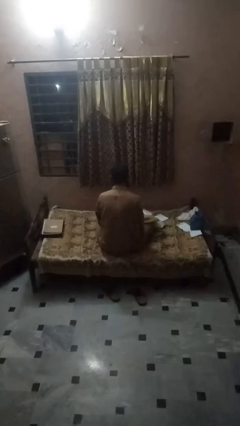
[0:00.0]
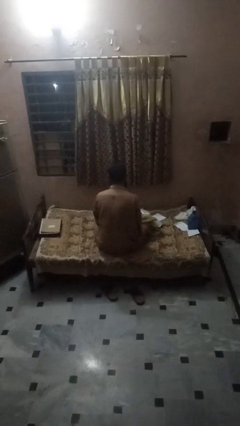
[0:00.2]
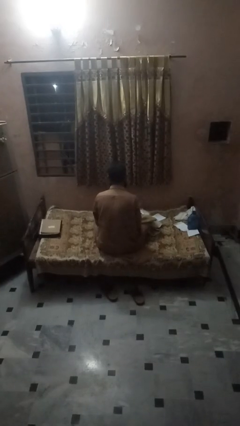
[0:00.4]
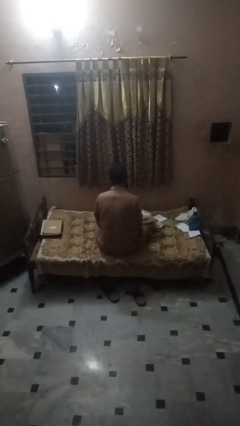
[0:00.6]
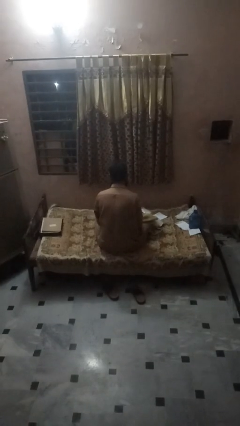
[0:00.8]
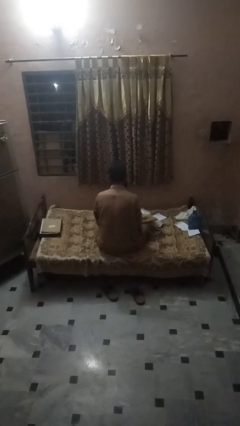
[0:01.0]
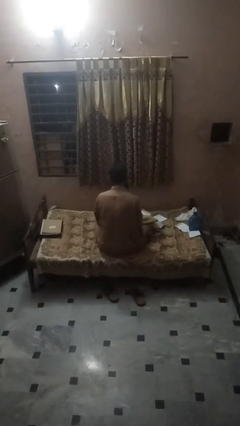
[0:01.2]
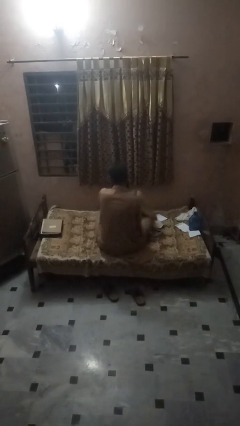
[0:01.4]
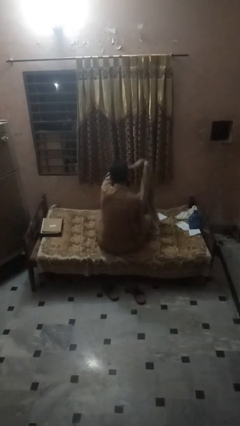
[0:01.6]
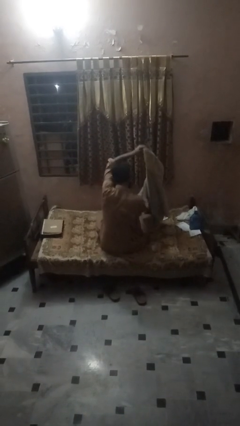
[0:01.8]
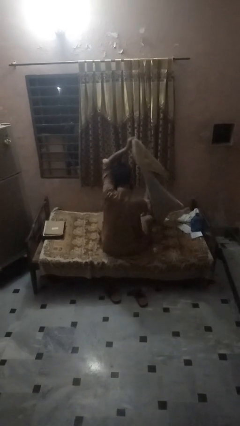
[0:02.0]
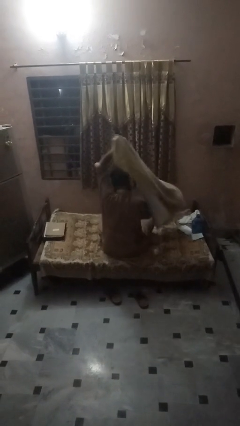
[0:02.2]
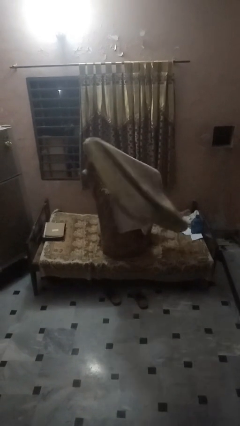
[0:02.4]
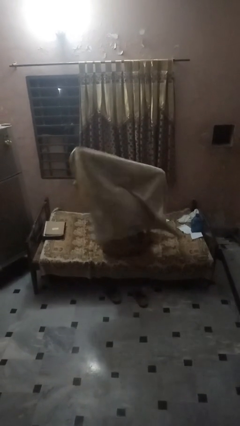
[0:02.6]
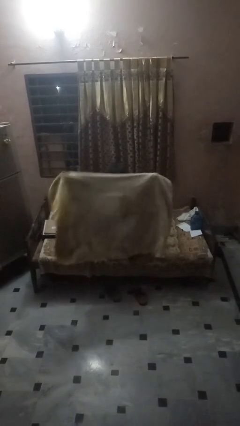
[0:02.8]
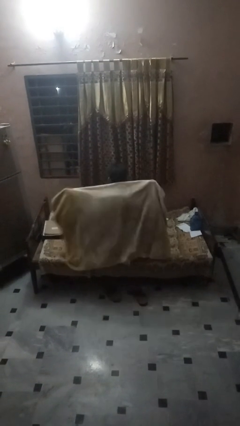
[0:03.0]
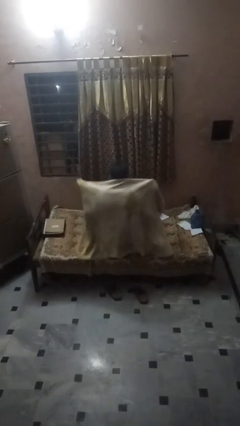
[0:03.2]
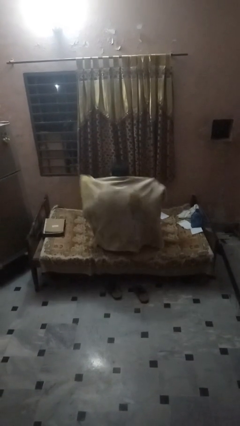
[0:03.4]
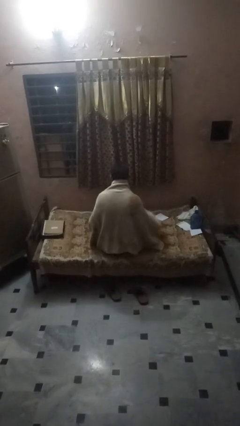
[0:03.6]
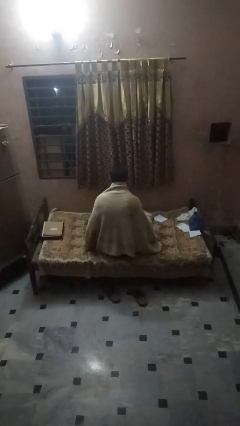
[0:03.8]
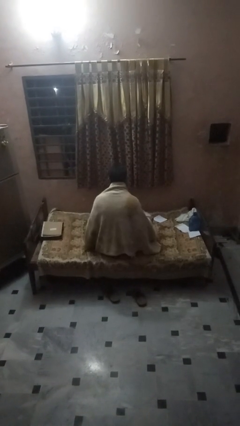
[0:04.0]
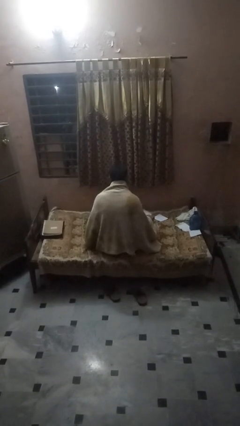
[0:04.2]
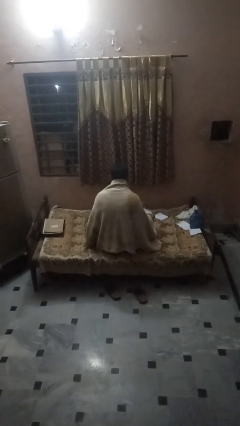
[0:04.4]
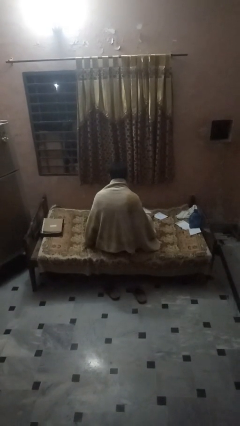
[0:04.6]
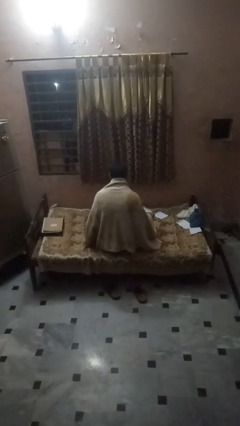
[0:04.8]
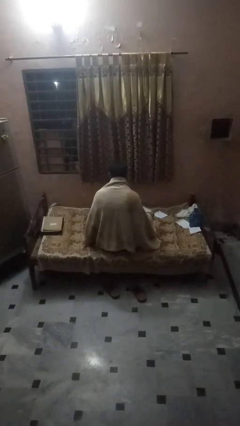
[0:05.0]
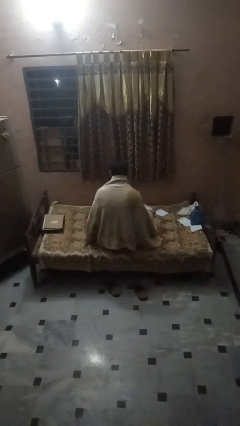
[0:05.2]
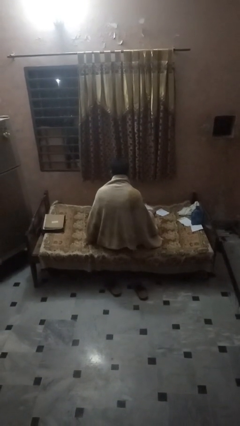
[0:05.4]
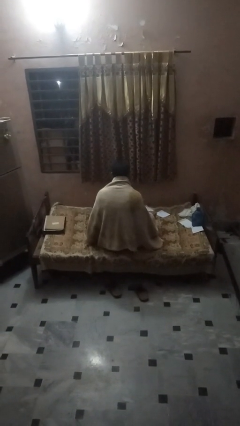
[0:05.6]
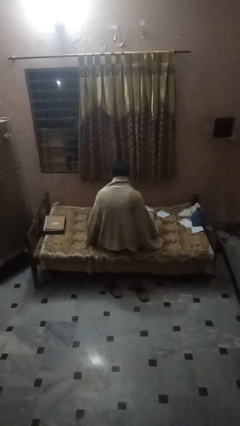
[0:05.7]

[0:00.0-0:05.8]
person covers with blanket

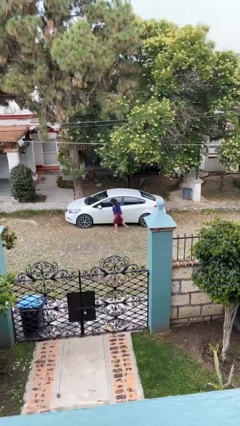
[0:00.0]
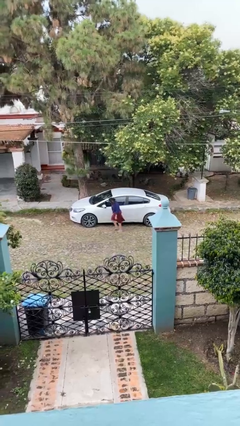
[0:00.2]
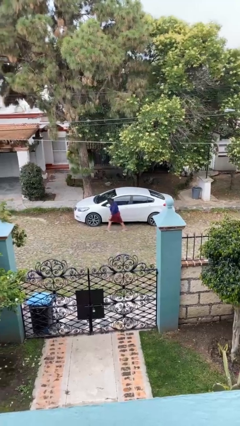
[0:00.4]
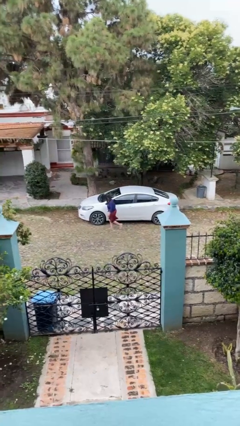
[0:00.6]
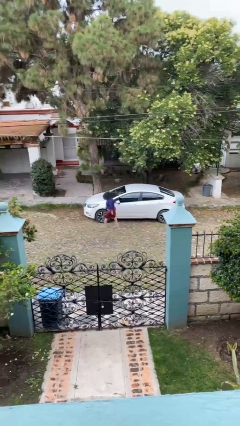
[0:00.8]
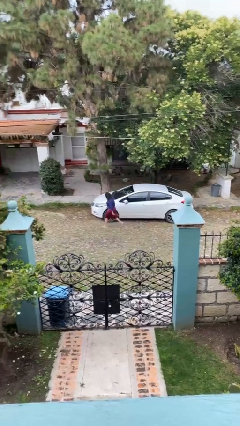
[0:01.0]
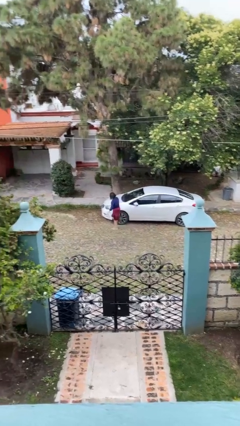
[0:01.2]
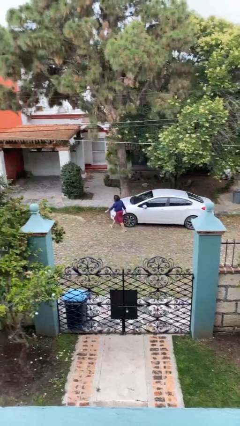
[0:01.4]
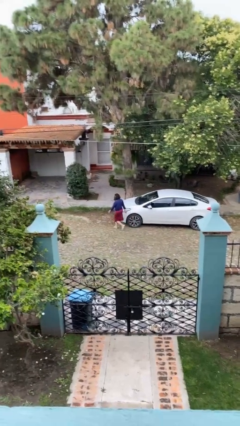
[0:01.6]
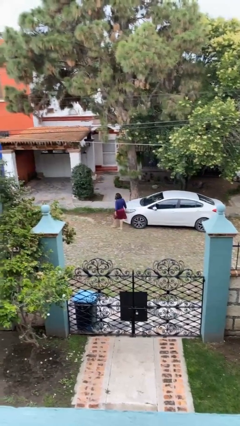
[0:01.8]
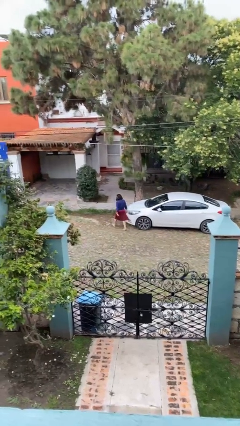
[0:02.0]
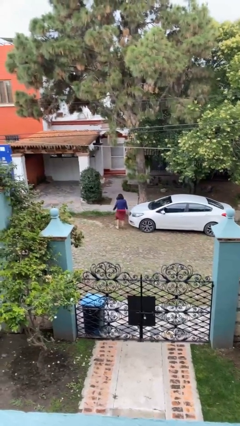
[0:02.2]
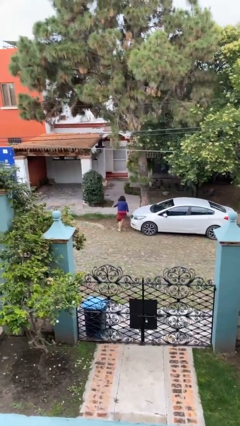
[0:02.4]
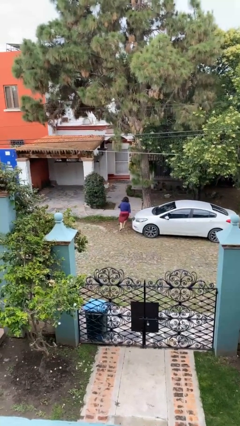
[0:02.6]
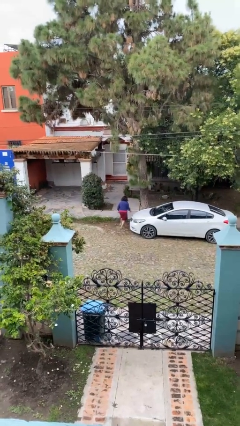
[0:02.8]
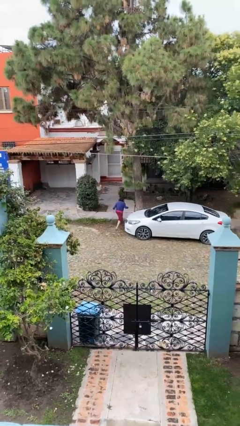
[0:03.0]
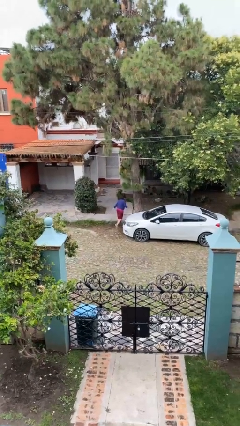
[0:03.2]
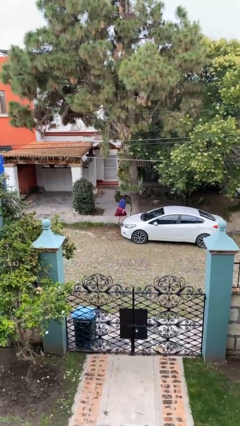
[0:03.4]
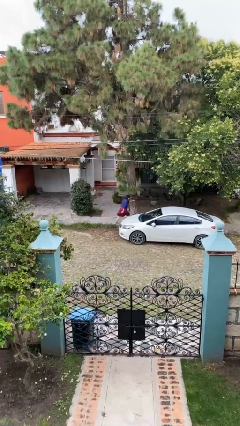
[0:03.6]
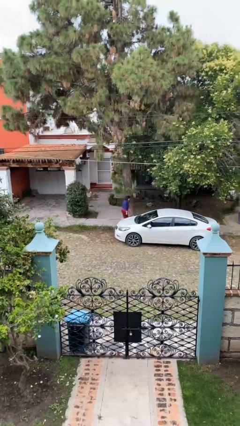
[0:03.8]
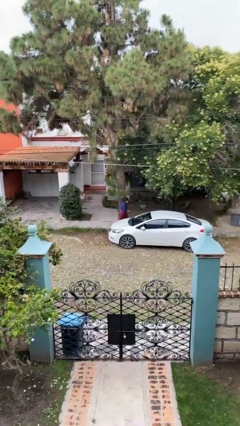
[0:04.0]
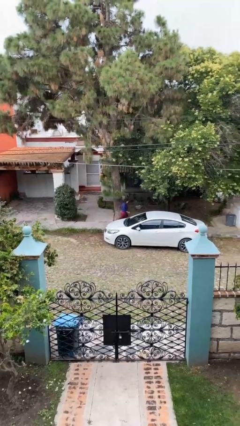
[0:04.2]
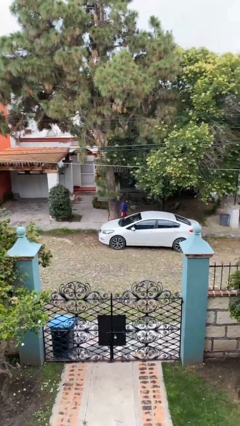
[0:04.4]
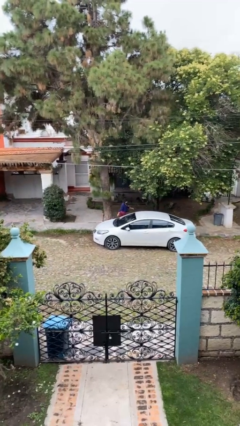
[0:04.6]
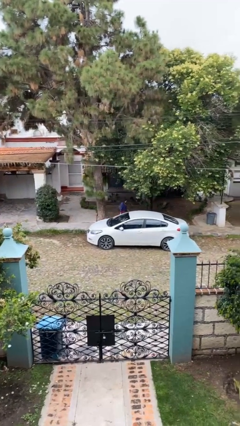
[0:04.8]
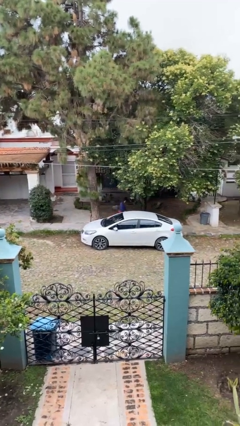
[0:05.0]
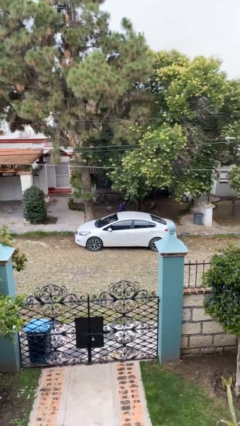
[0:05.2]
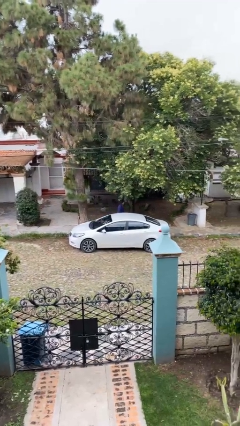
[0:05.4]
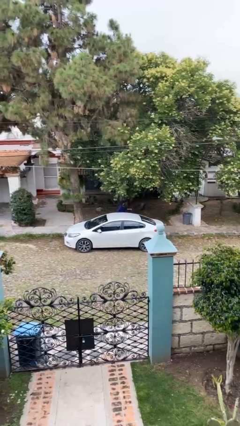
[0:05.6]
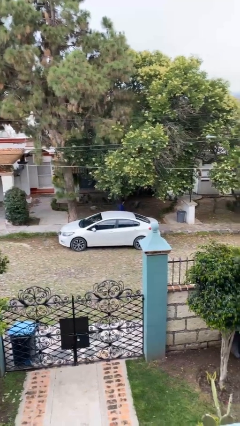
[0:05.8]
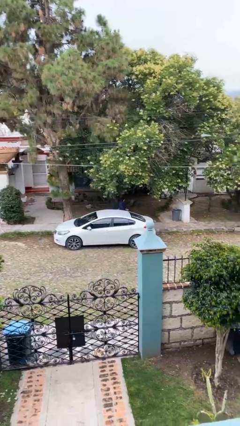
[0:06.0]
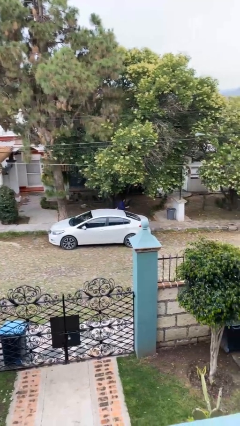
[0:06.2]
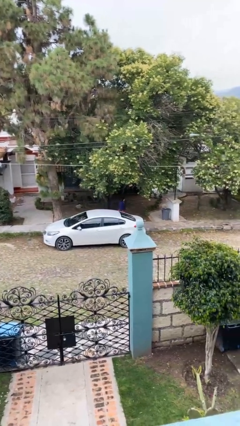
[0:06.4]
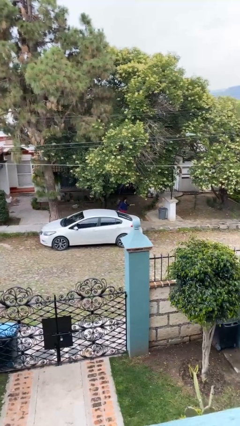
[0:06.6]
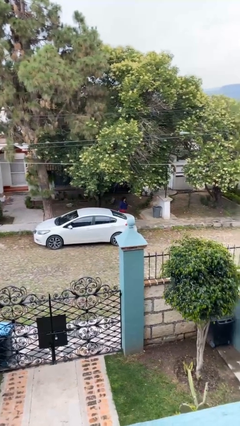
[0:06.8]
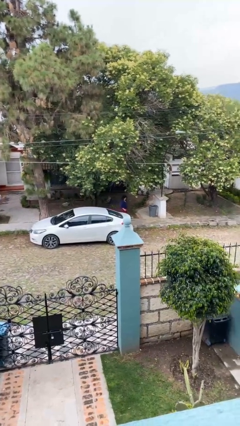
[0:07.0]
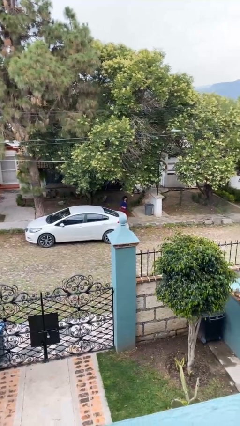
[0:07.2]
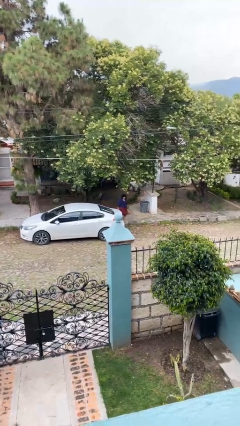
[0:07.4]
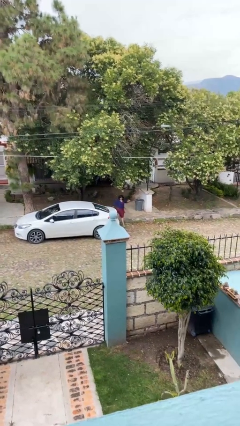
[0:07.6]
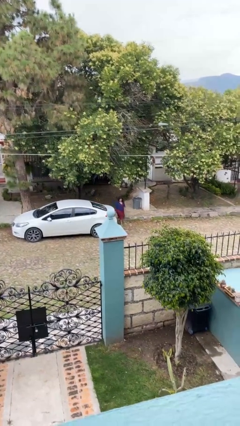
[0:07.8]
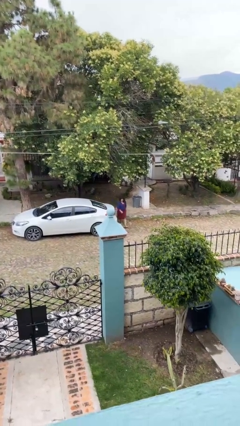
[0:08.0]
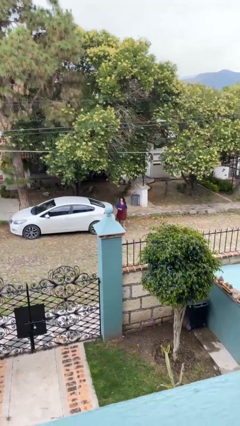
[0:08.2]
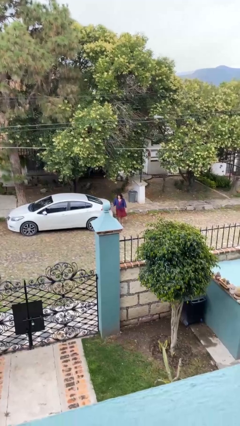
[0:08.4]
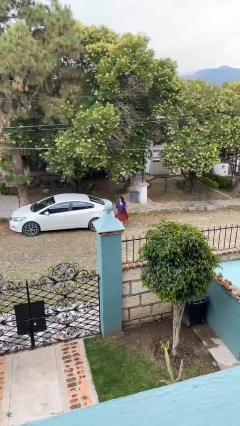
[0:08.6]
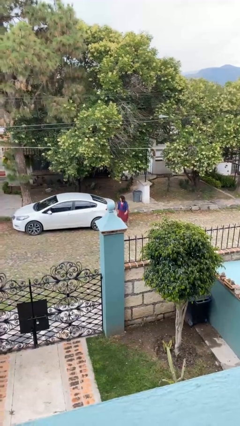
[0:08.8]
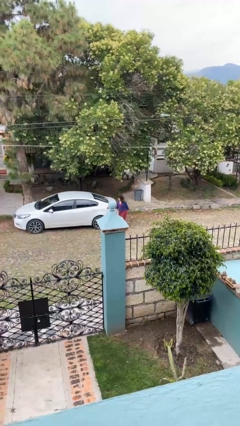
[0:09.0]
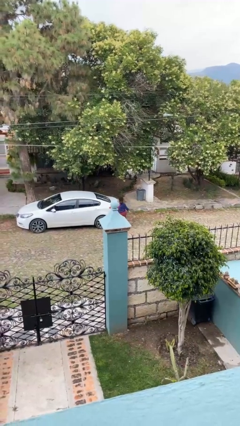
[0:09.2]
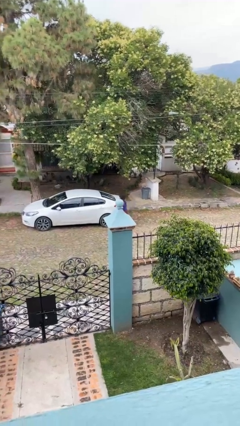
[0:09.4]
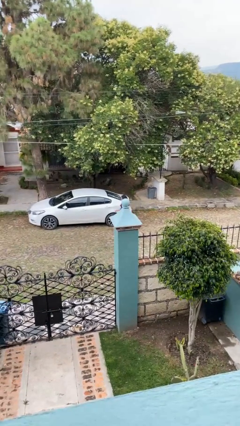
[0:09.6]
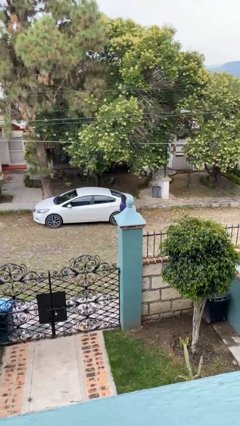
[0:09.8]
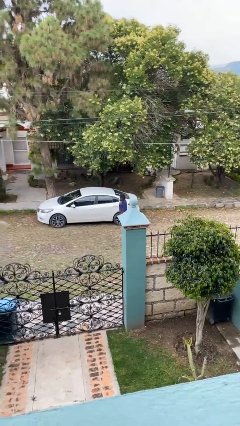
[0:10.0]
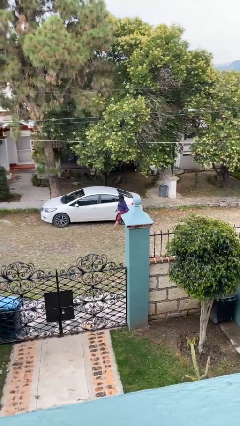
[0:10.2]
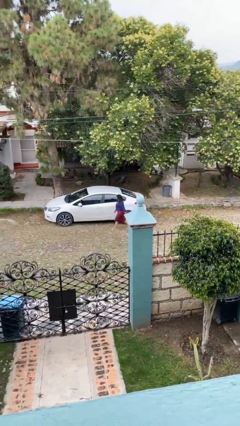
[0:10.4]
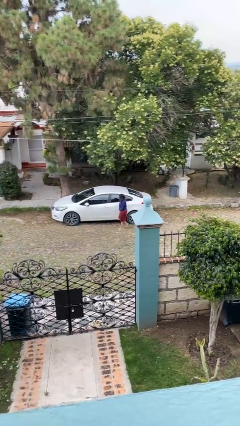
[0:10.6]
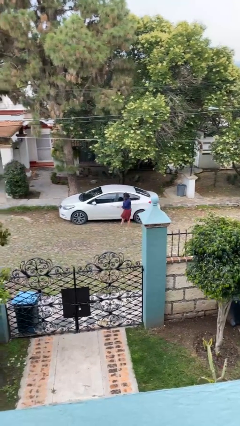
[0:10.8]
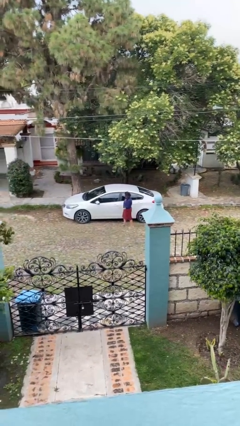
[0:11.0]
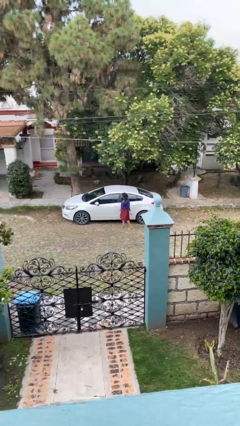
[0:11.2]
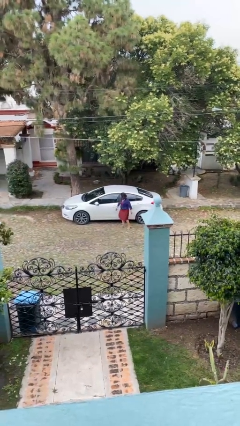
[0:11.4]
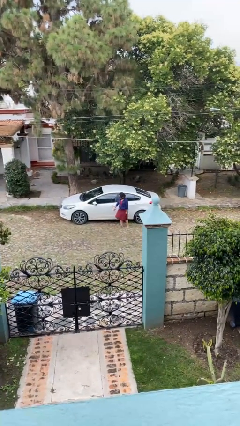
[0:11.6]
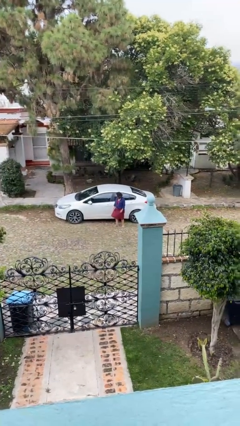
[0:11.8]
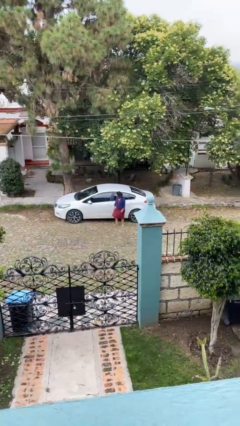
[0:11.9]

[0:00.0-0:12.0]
person walks around car

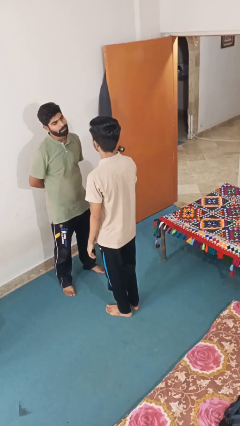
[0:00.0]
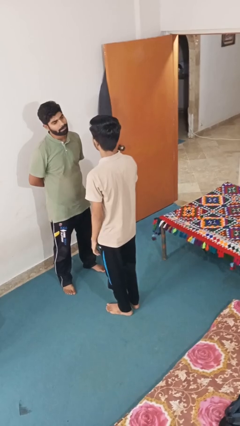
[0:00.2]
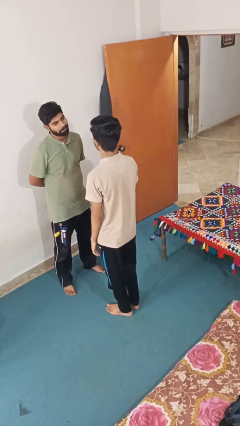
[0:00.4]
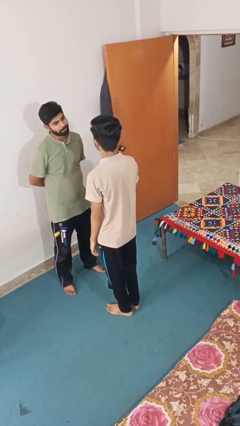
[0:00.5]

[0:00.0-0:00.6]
person shoves person
